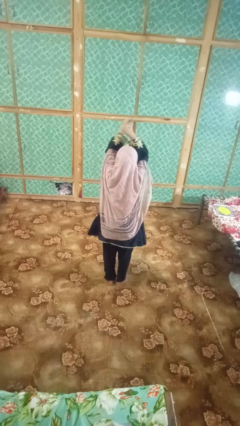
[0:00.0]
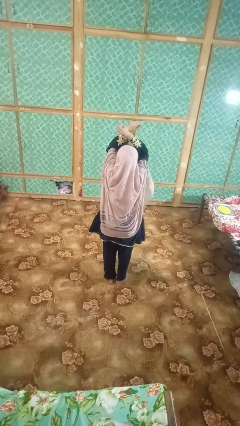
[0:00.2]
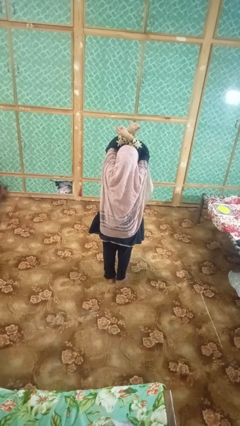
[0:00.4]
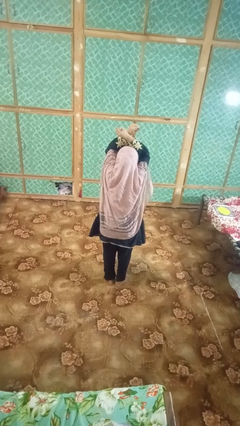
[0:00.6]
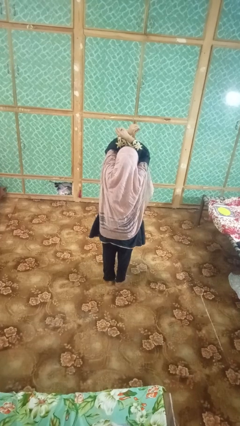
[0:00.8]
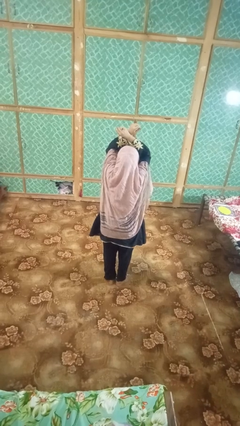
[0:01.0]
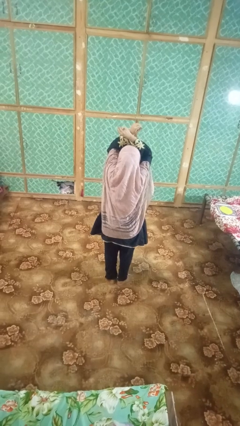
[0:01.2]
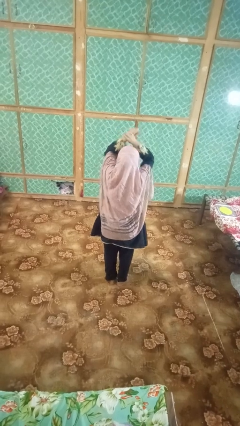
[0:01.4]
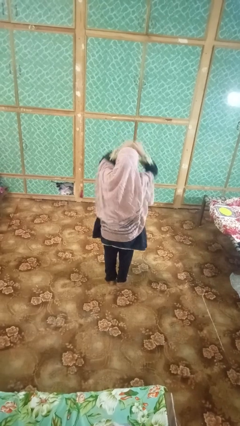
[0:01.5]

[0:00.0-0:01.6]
person gestures arms x

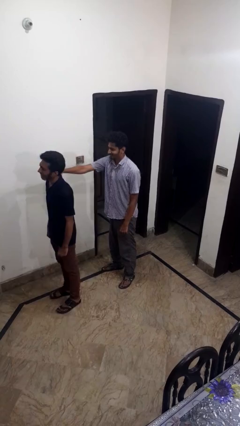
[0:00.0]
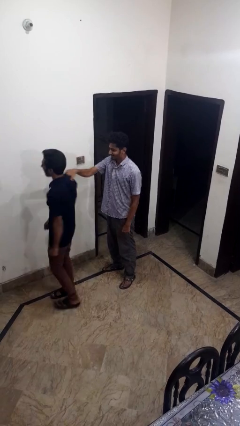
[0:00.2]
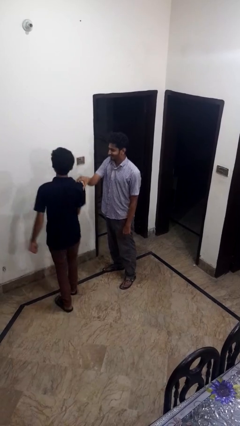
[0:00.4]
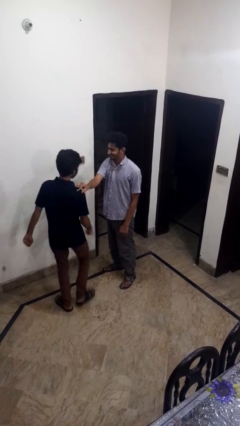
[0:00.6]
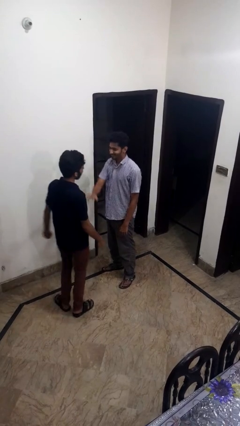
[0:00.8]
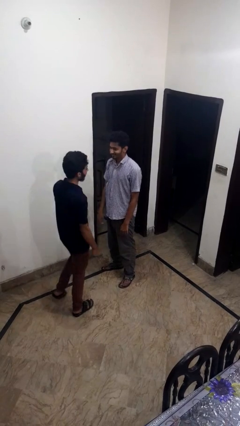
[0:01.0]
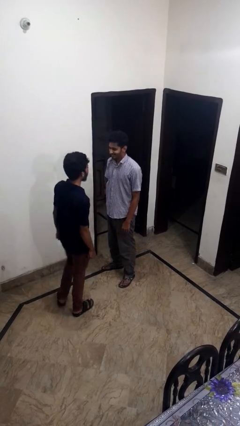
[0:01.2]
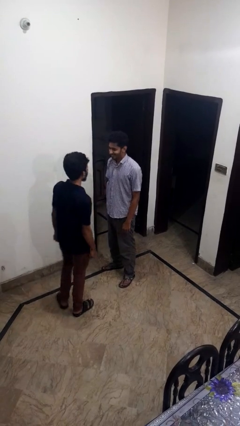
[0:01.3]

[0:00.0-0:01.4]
person spins person around

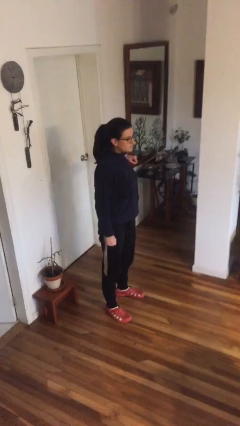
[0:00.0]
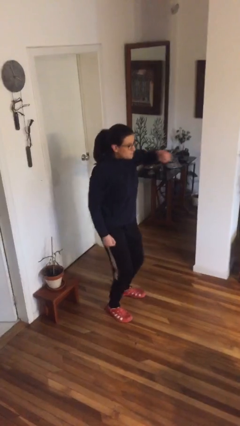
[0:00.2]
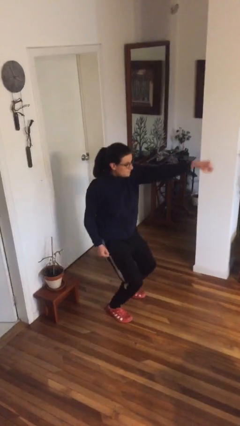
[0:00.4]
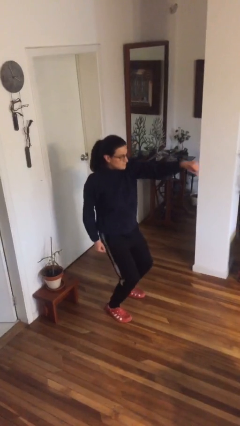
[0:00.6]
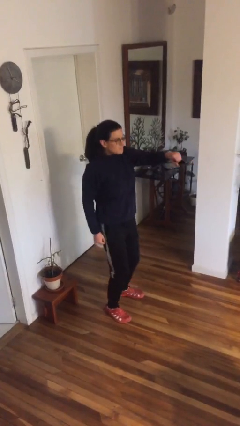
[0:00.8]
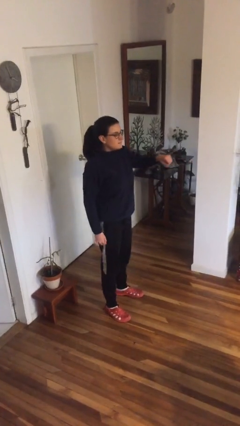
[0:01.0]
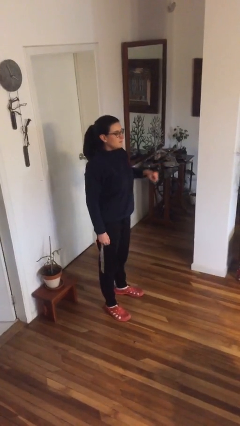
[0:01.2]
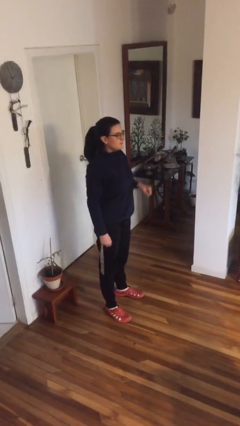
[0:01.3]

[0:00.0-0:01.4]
person punches

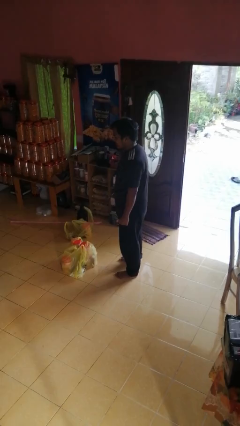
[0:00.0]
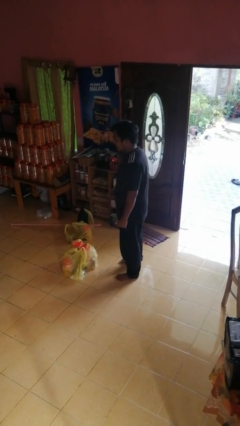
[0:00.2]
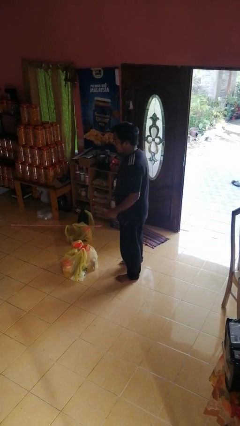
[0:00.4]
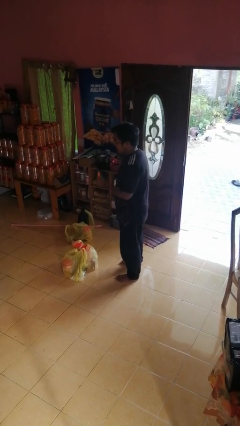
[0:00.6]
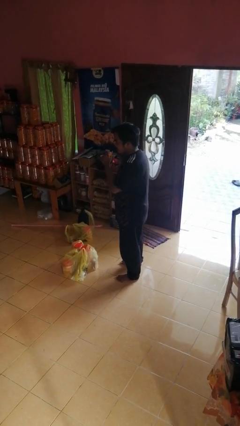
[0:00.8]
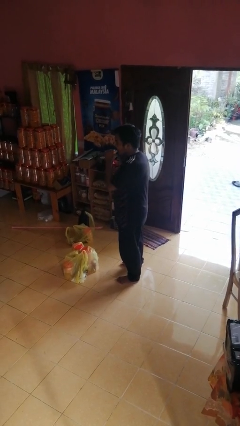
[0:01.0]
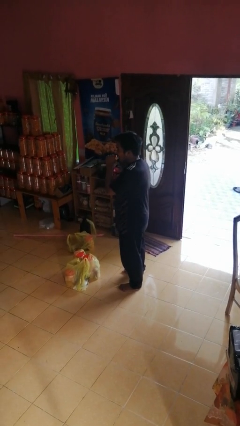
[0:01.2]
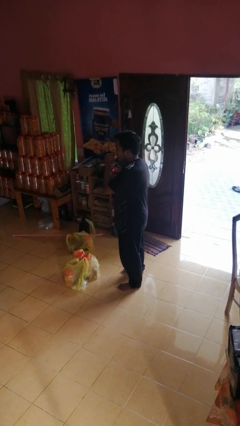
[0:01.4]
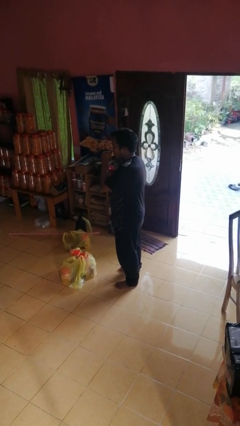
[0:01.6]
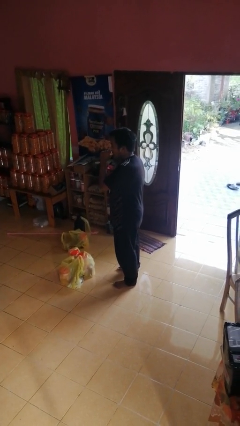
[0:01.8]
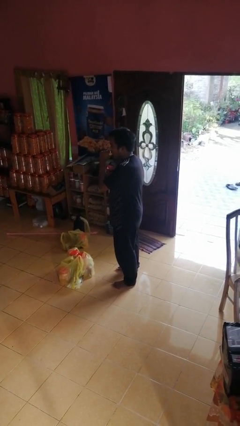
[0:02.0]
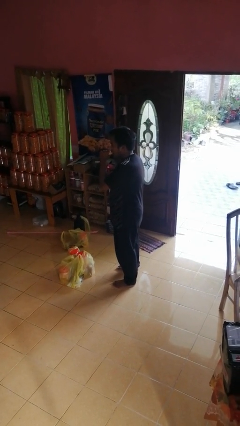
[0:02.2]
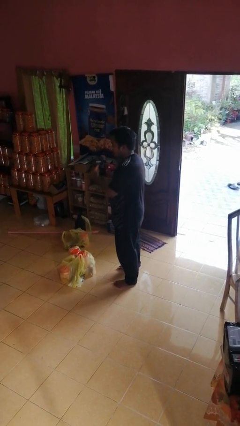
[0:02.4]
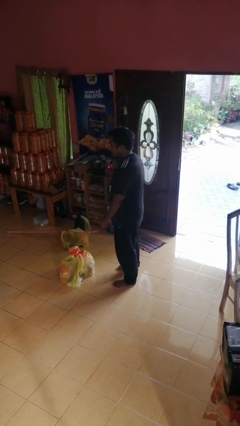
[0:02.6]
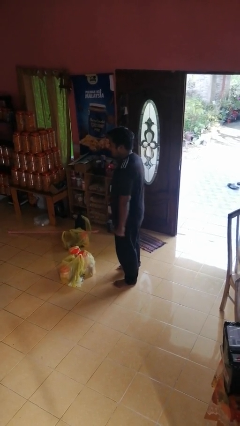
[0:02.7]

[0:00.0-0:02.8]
person eats banana

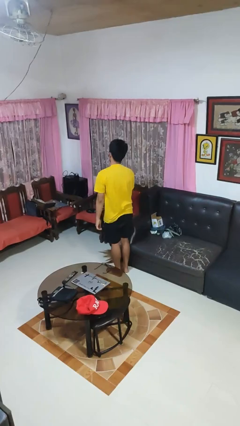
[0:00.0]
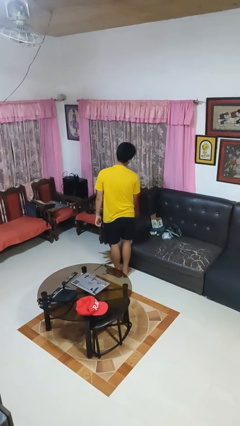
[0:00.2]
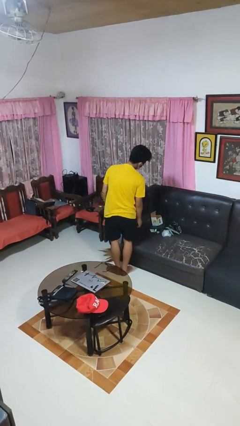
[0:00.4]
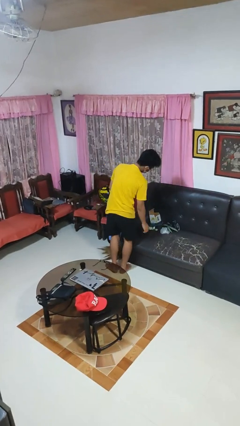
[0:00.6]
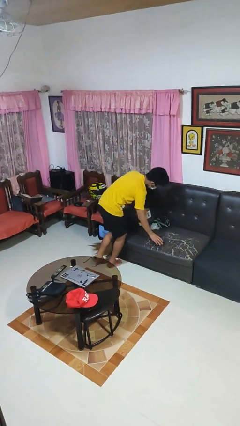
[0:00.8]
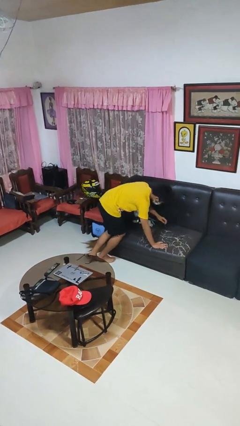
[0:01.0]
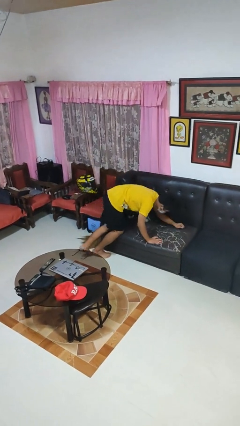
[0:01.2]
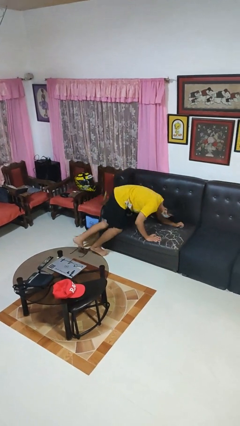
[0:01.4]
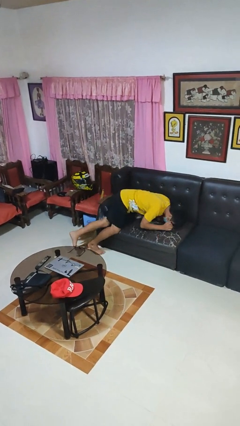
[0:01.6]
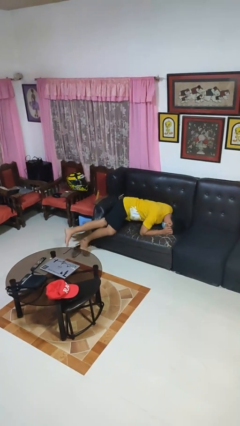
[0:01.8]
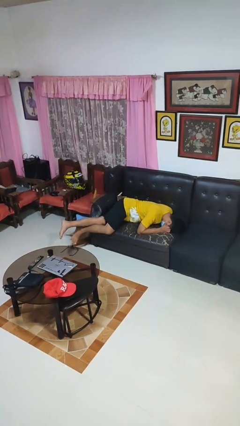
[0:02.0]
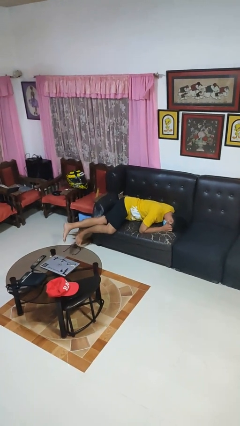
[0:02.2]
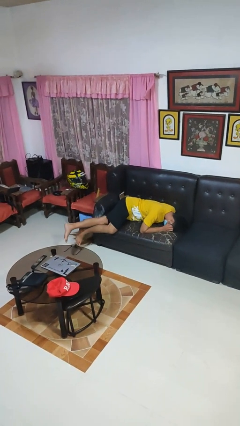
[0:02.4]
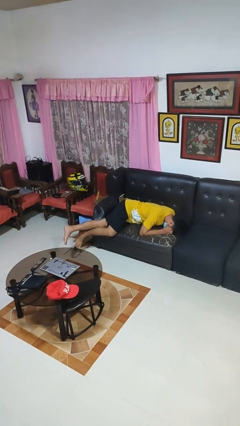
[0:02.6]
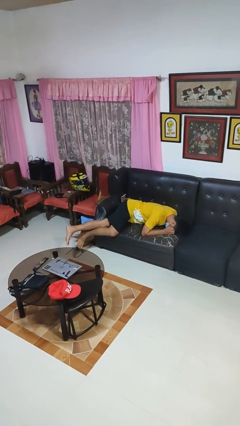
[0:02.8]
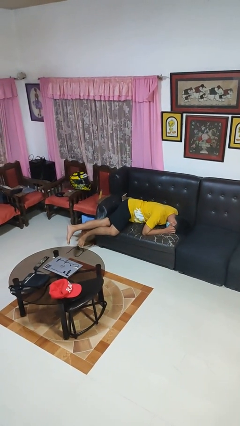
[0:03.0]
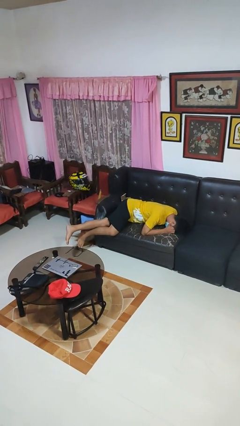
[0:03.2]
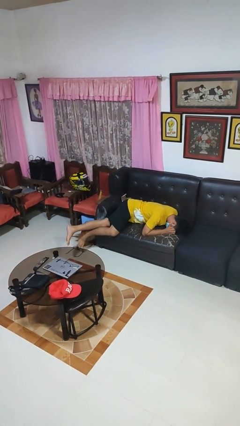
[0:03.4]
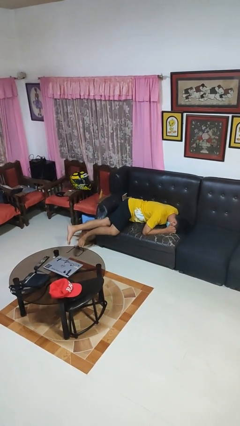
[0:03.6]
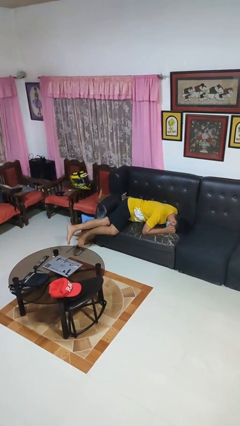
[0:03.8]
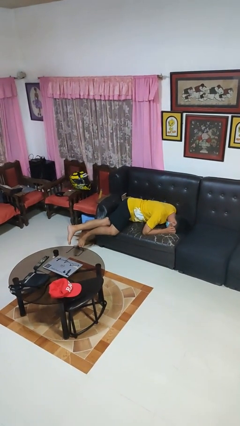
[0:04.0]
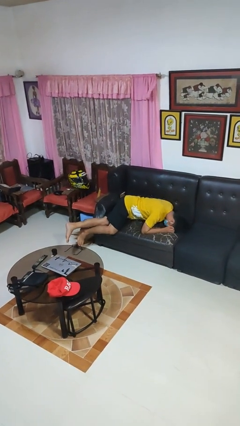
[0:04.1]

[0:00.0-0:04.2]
person lies down on couch

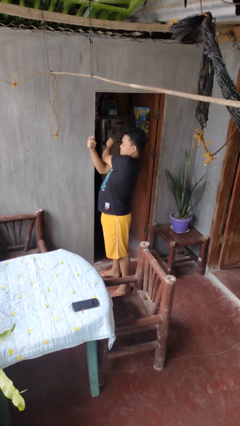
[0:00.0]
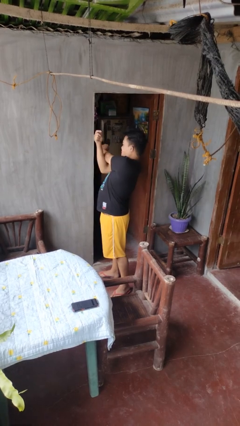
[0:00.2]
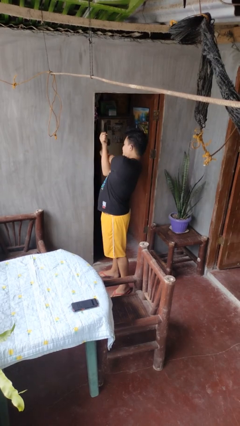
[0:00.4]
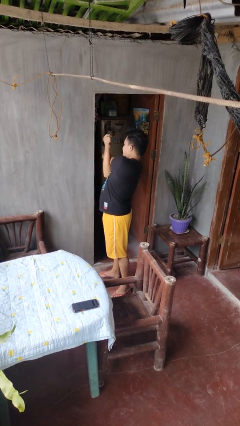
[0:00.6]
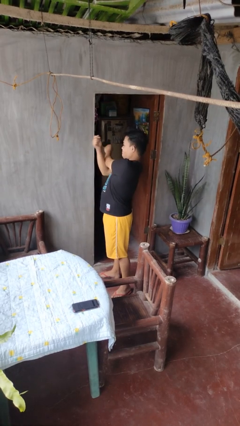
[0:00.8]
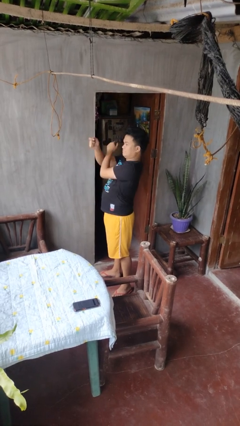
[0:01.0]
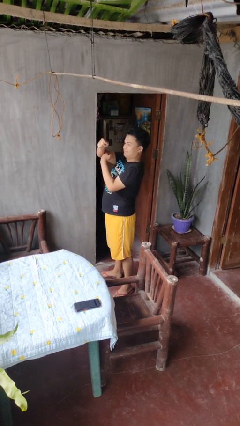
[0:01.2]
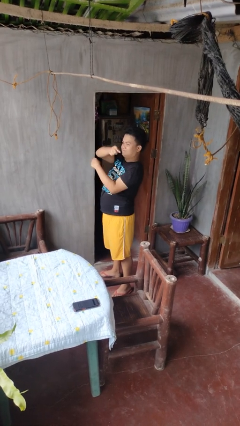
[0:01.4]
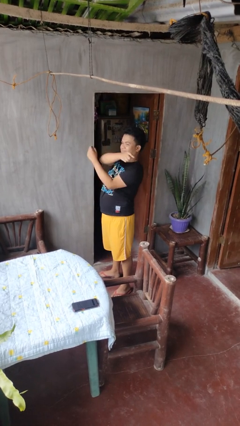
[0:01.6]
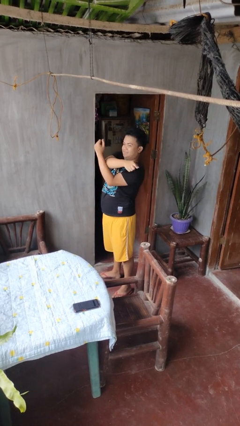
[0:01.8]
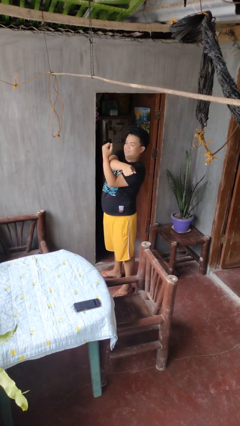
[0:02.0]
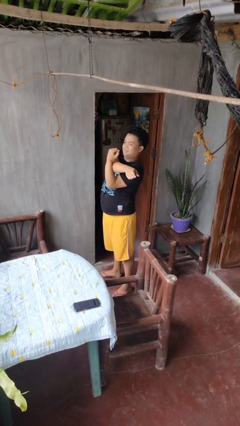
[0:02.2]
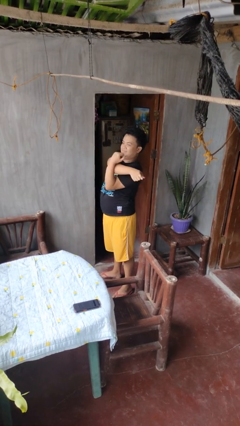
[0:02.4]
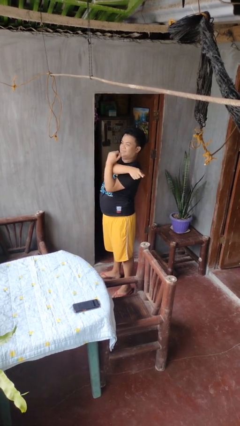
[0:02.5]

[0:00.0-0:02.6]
person stretches arms to side

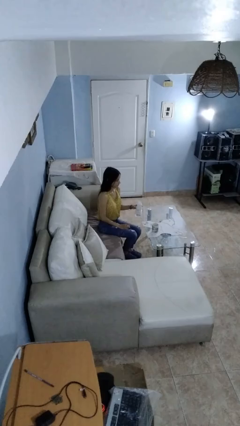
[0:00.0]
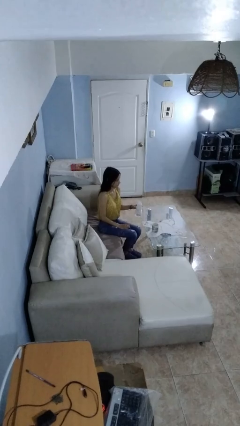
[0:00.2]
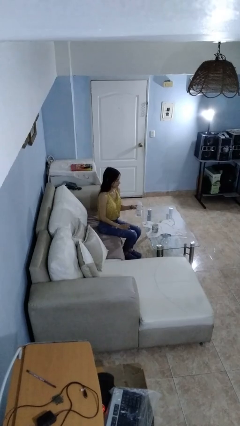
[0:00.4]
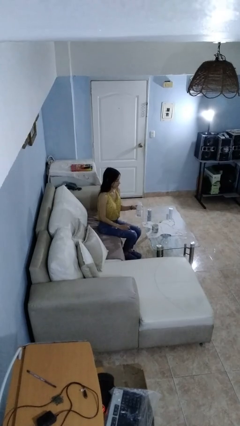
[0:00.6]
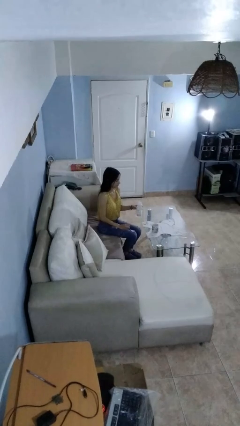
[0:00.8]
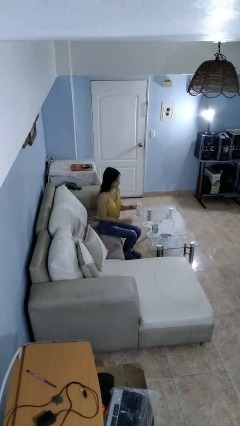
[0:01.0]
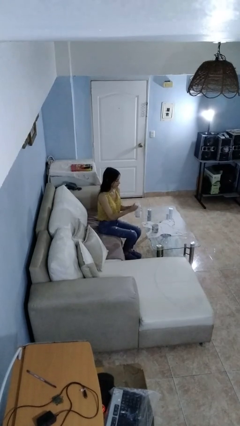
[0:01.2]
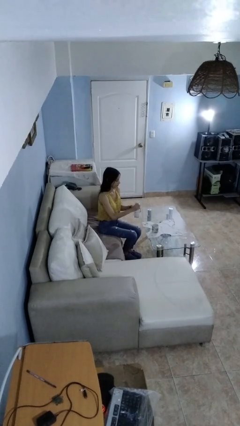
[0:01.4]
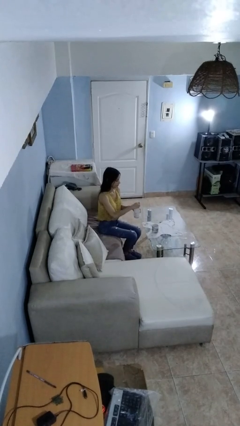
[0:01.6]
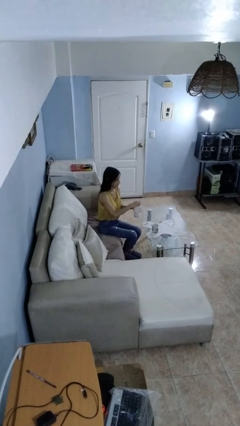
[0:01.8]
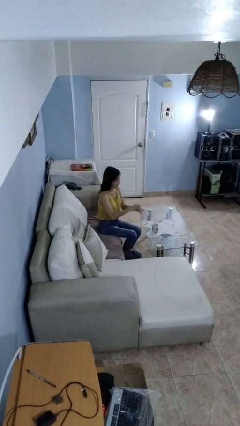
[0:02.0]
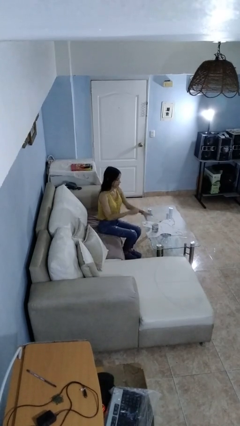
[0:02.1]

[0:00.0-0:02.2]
person pours liquid into cup

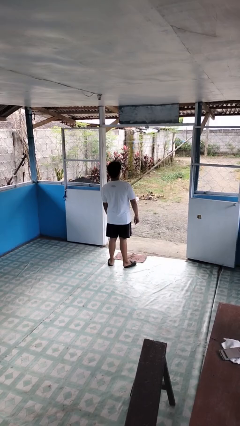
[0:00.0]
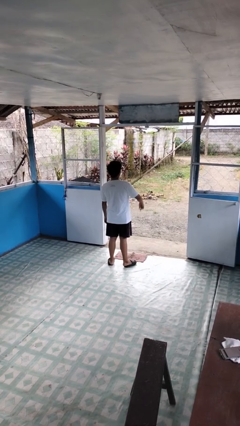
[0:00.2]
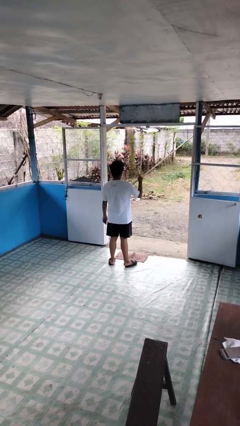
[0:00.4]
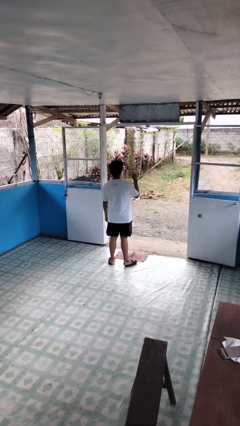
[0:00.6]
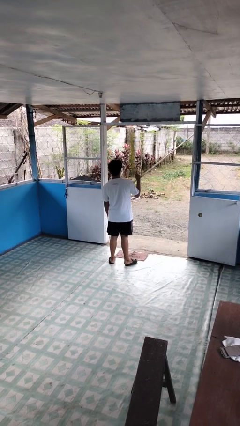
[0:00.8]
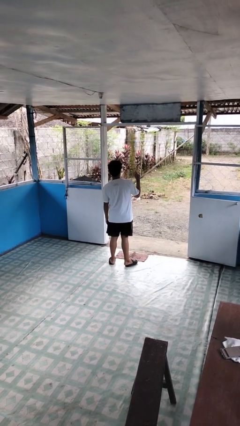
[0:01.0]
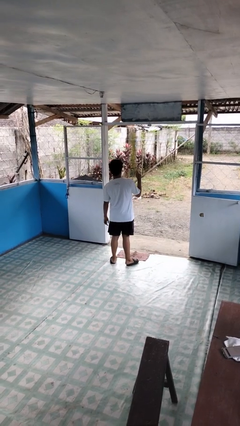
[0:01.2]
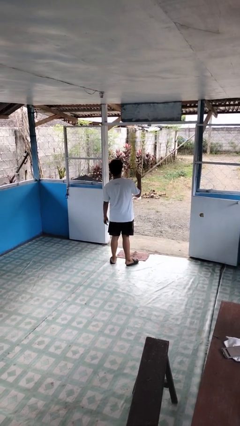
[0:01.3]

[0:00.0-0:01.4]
person gestures number one
